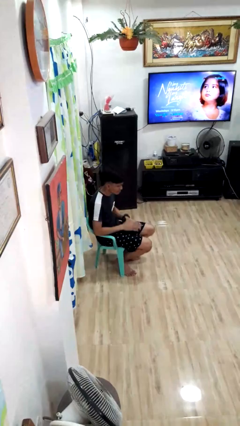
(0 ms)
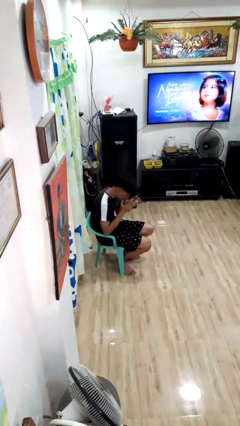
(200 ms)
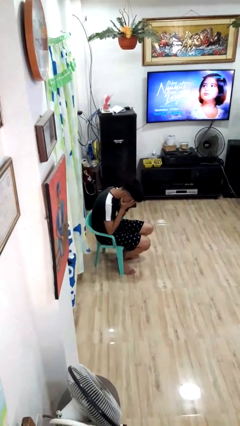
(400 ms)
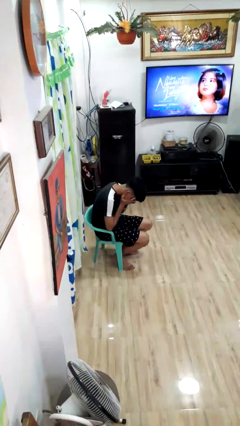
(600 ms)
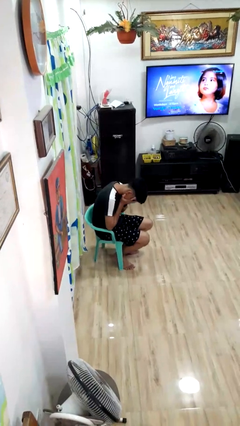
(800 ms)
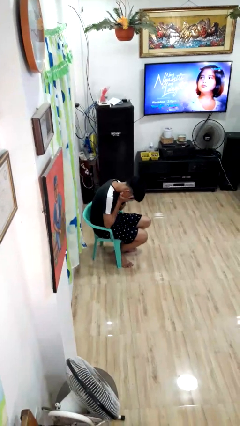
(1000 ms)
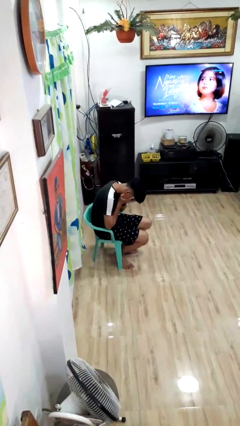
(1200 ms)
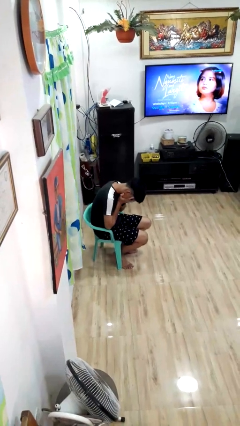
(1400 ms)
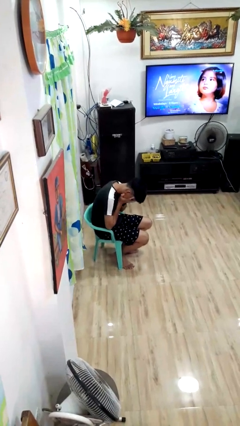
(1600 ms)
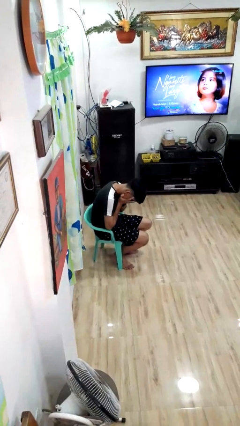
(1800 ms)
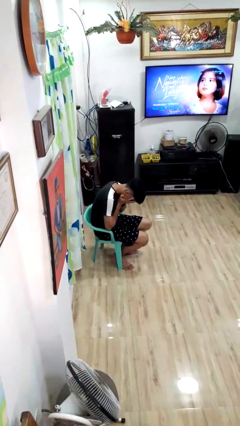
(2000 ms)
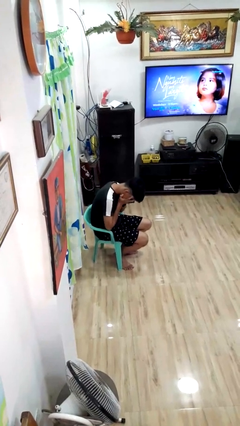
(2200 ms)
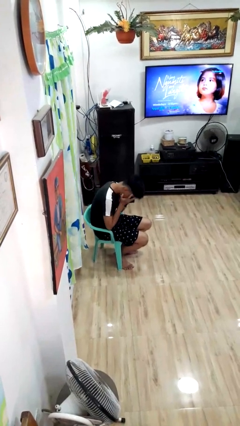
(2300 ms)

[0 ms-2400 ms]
person covers face with hands

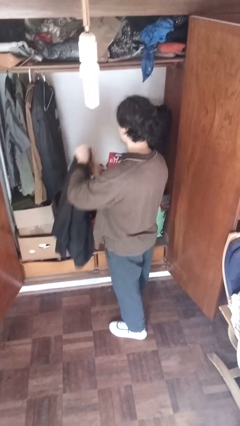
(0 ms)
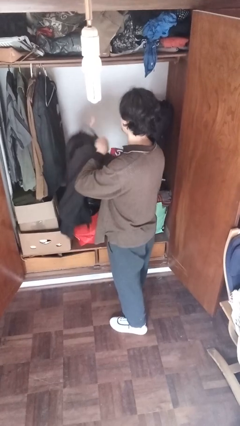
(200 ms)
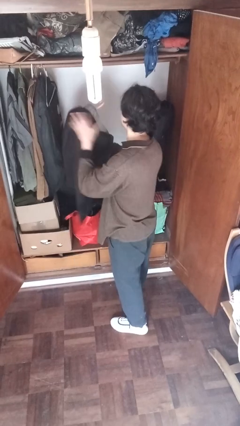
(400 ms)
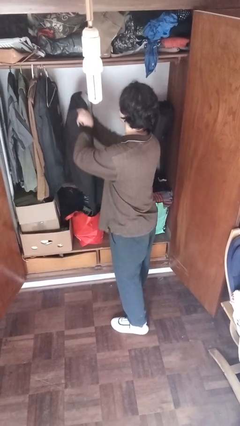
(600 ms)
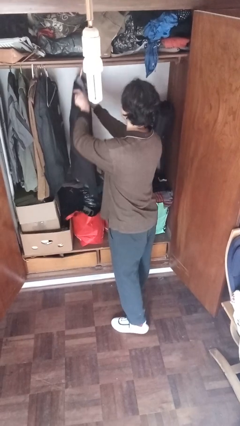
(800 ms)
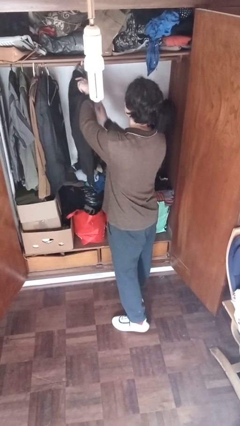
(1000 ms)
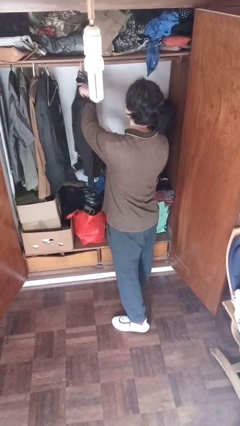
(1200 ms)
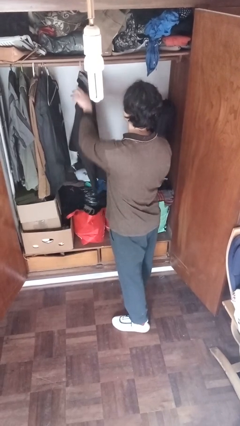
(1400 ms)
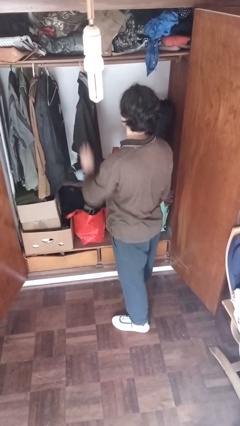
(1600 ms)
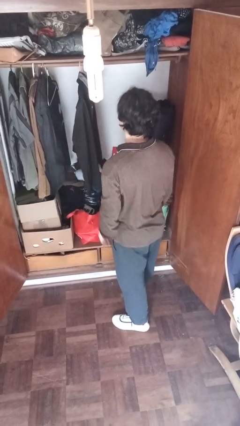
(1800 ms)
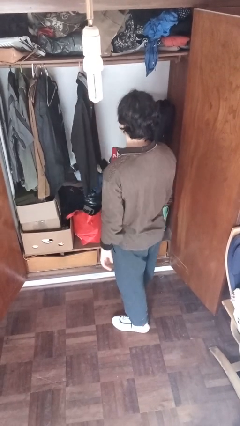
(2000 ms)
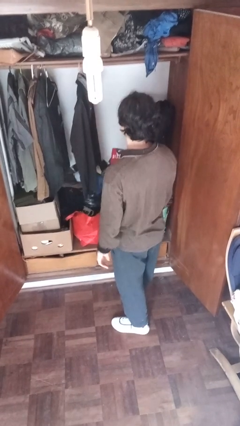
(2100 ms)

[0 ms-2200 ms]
person puts clothes into closet

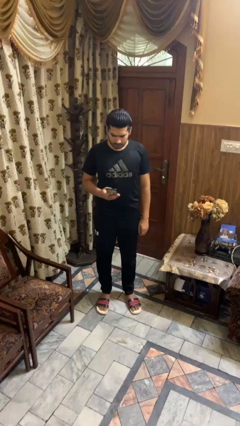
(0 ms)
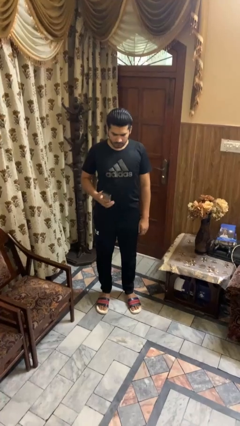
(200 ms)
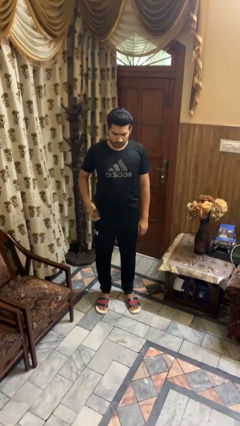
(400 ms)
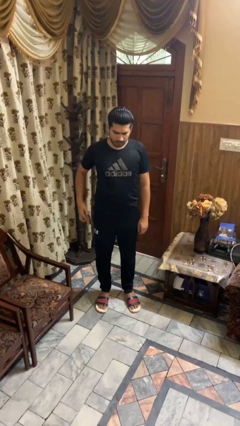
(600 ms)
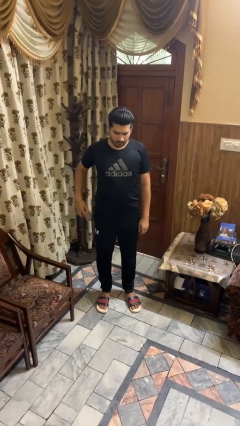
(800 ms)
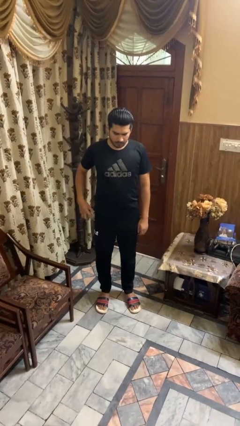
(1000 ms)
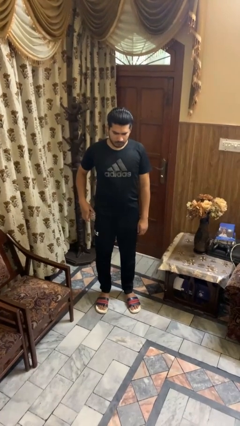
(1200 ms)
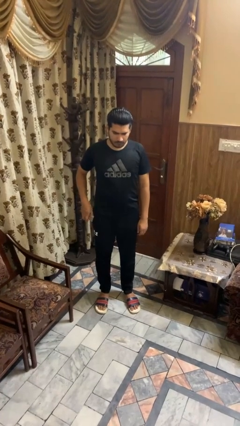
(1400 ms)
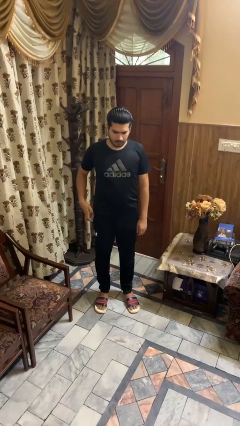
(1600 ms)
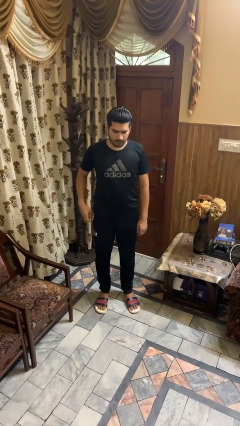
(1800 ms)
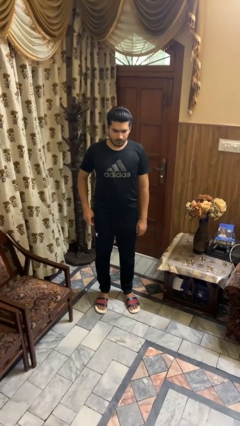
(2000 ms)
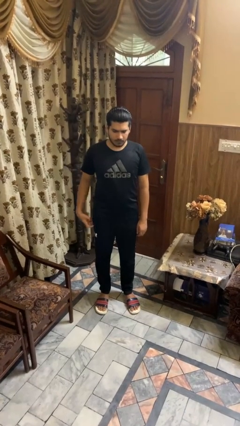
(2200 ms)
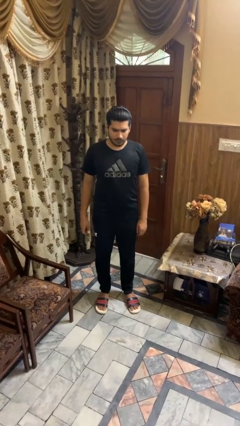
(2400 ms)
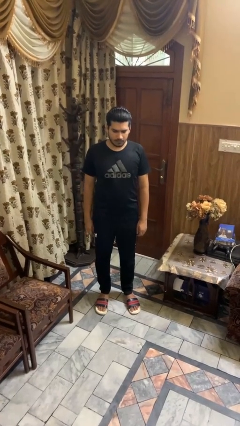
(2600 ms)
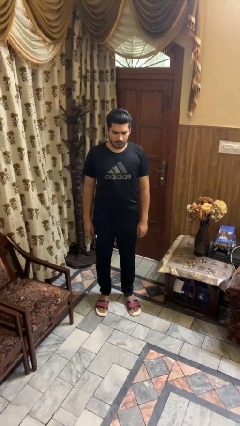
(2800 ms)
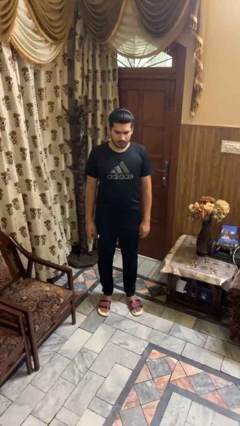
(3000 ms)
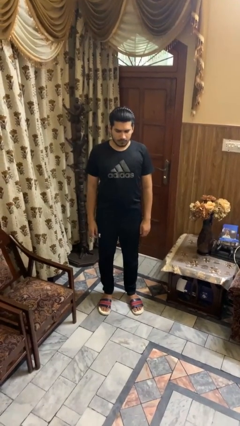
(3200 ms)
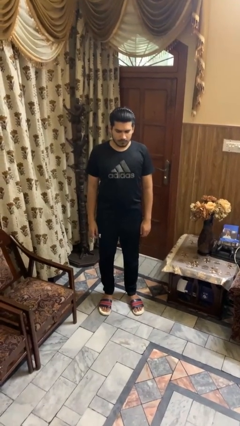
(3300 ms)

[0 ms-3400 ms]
person puts phone into pocket

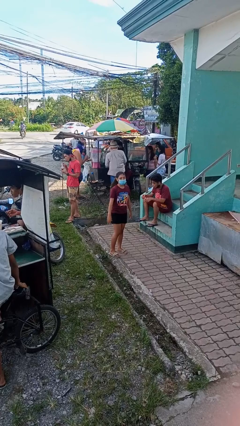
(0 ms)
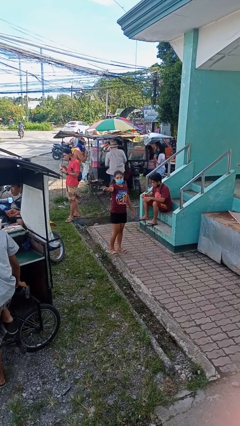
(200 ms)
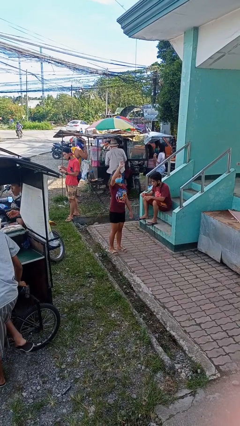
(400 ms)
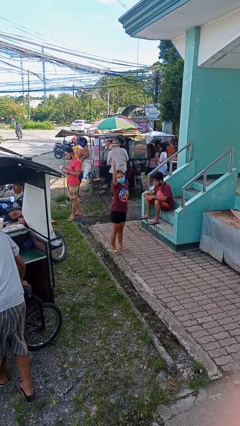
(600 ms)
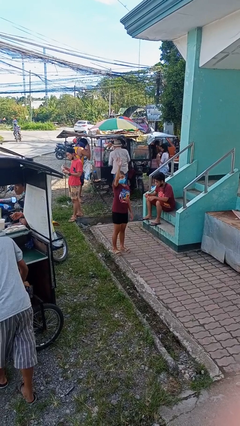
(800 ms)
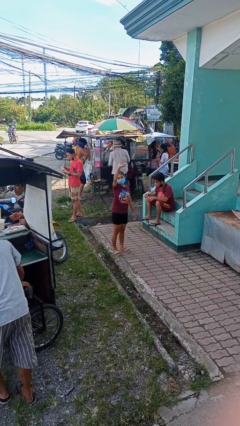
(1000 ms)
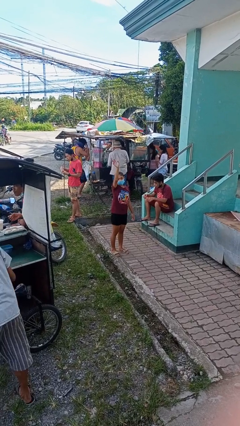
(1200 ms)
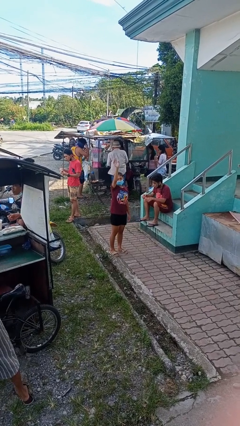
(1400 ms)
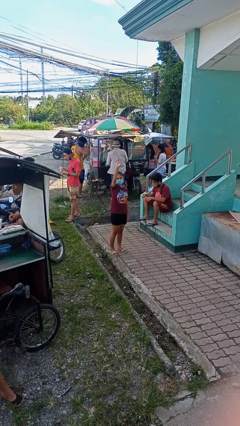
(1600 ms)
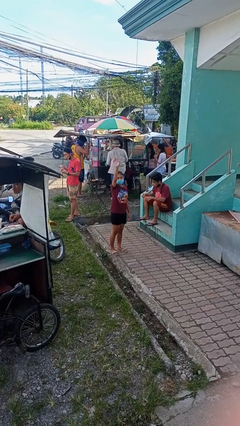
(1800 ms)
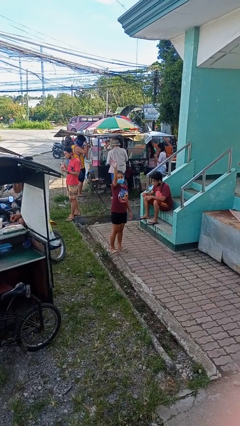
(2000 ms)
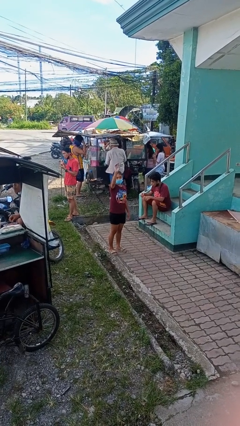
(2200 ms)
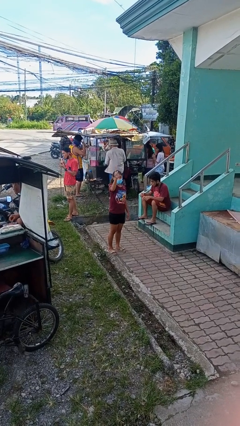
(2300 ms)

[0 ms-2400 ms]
person waves at person

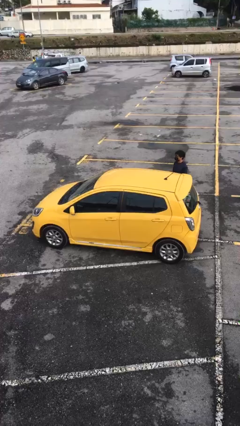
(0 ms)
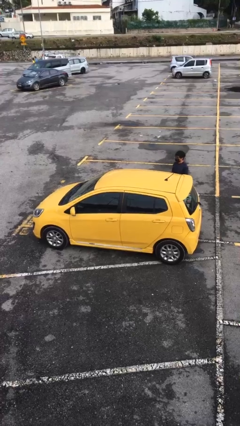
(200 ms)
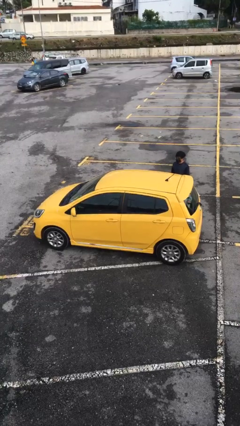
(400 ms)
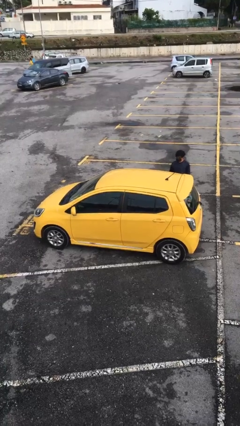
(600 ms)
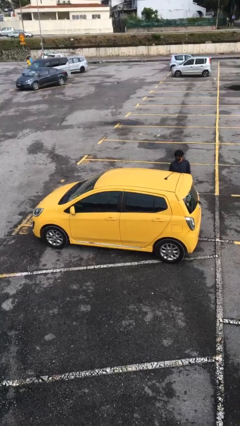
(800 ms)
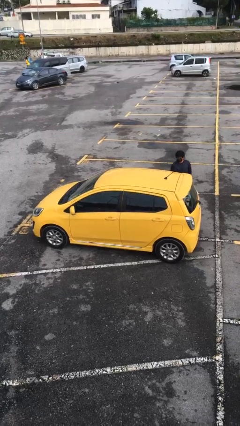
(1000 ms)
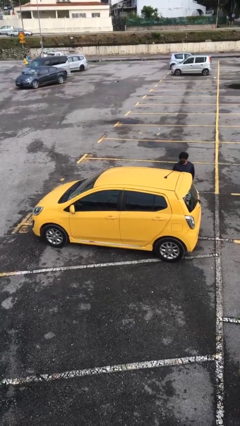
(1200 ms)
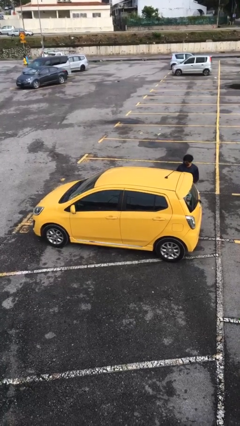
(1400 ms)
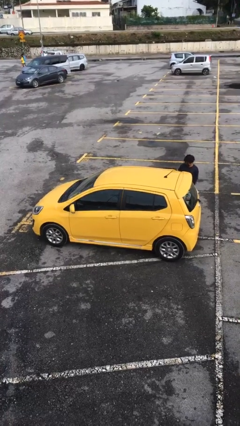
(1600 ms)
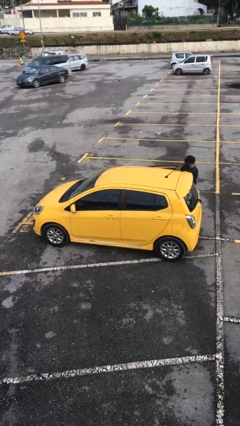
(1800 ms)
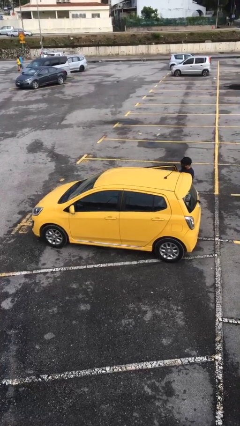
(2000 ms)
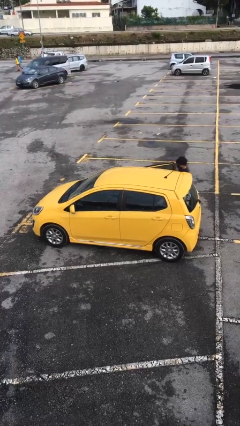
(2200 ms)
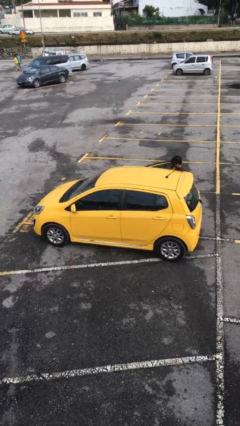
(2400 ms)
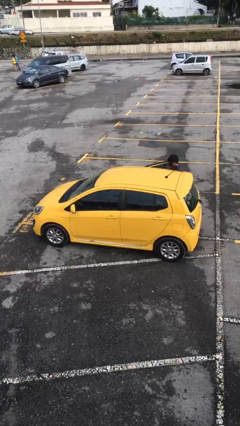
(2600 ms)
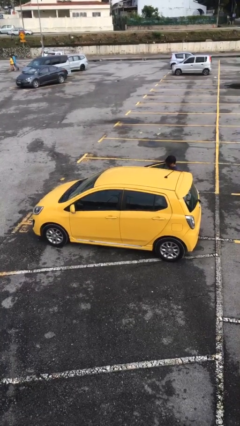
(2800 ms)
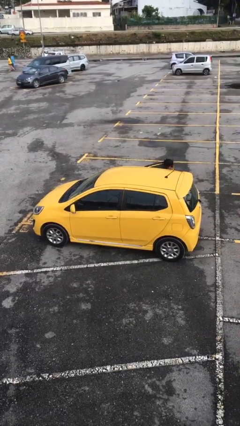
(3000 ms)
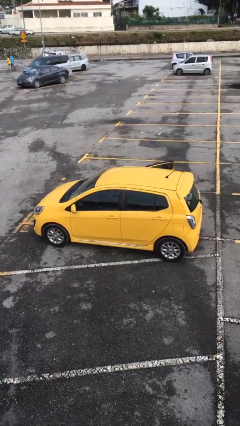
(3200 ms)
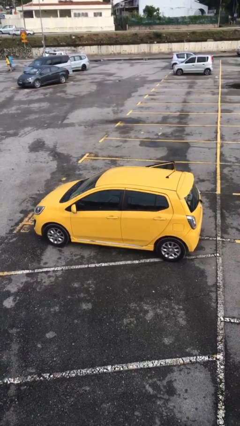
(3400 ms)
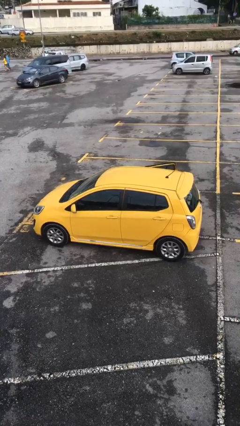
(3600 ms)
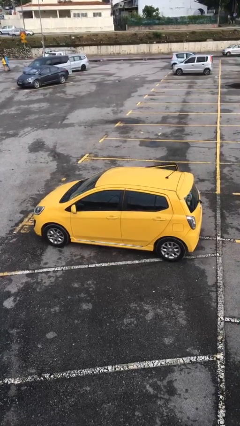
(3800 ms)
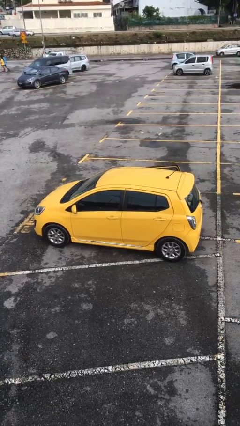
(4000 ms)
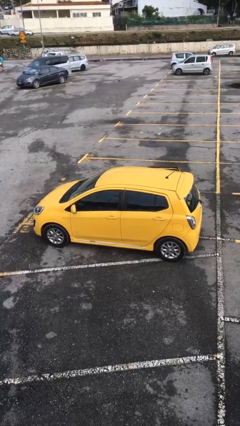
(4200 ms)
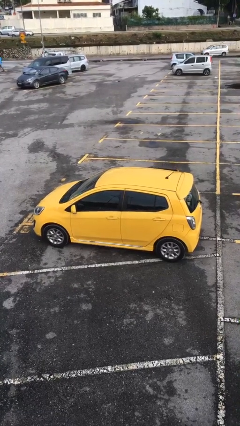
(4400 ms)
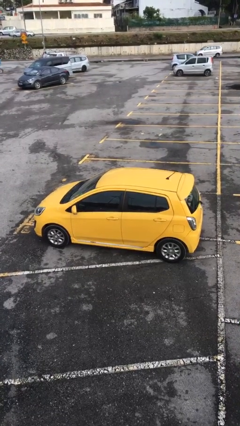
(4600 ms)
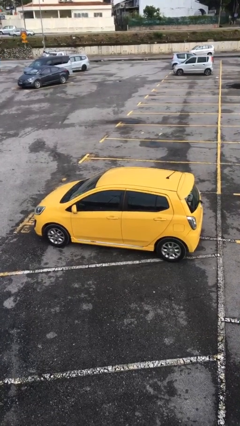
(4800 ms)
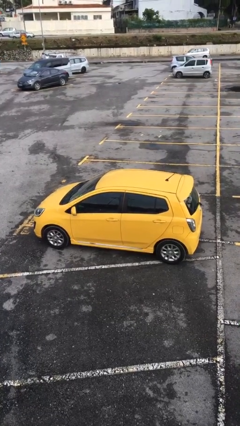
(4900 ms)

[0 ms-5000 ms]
car picks up person

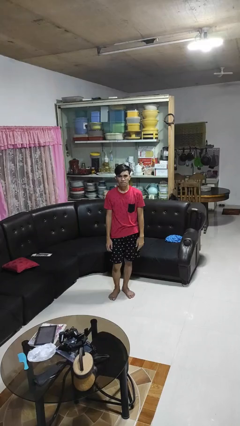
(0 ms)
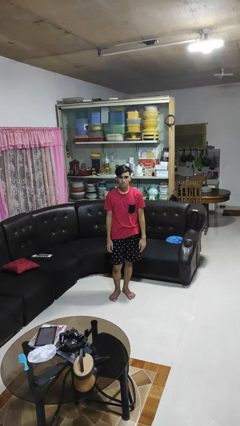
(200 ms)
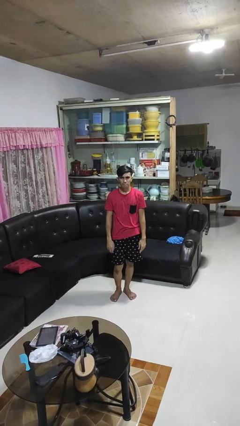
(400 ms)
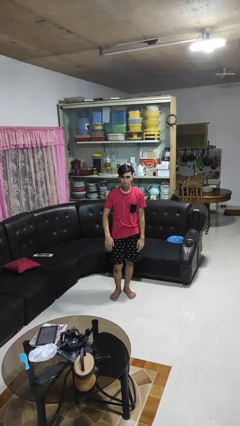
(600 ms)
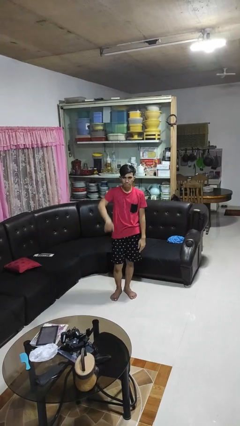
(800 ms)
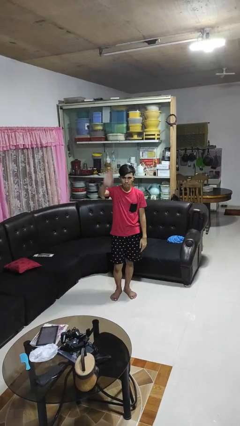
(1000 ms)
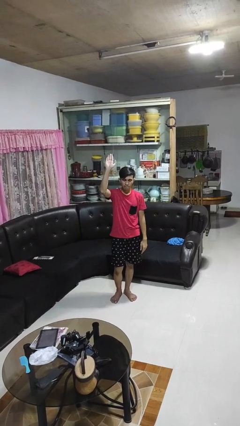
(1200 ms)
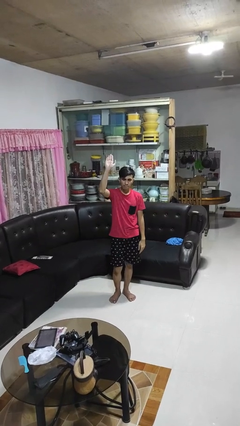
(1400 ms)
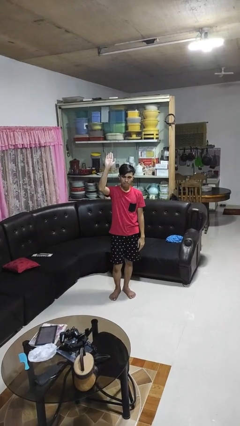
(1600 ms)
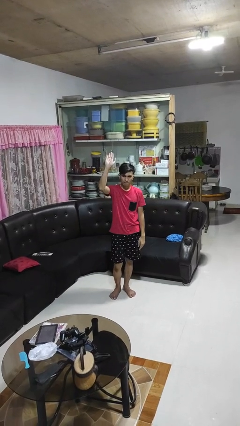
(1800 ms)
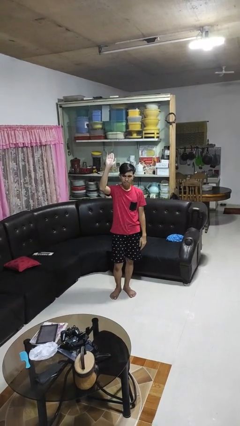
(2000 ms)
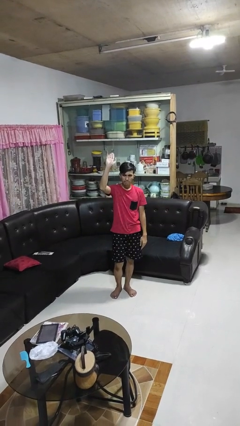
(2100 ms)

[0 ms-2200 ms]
person gestures swipe up
